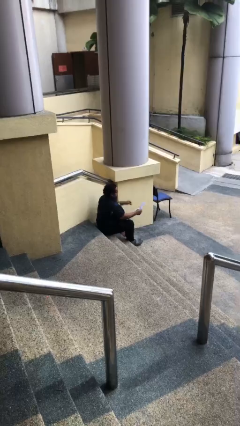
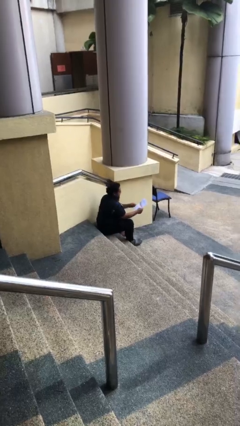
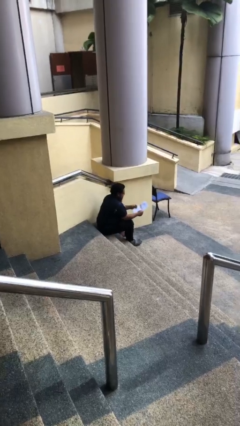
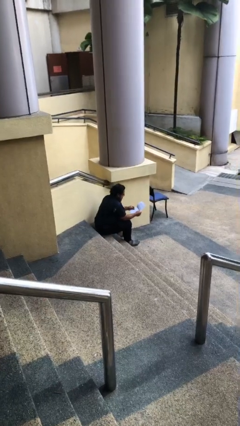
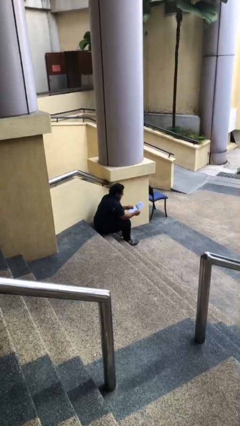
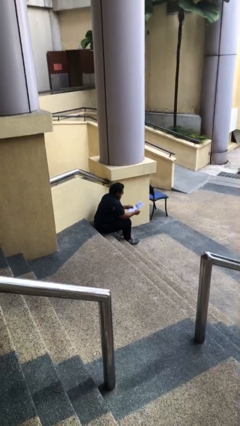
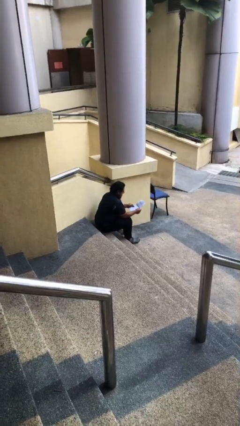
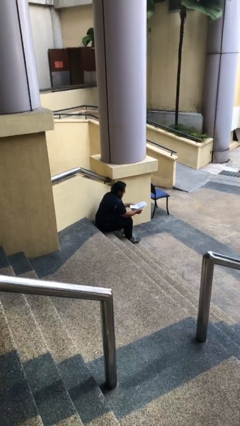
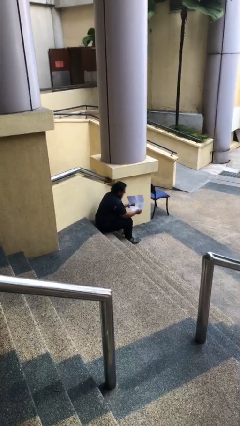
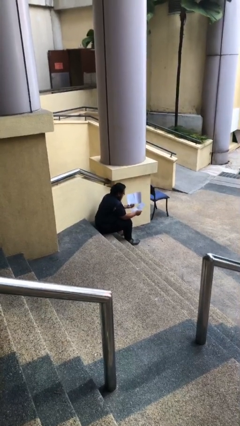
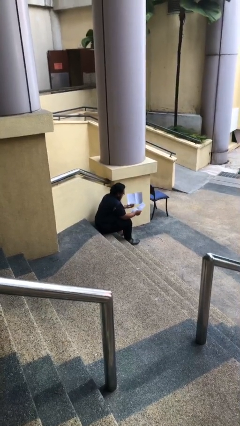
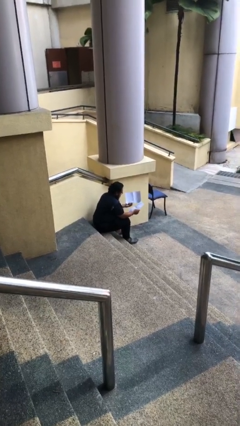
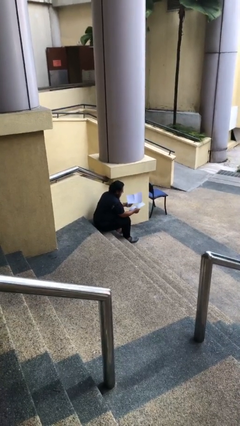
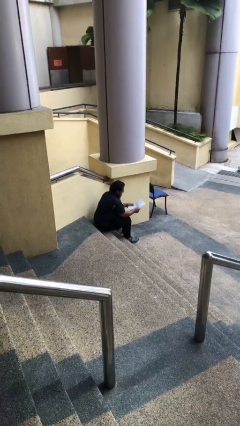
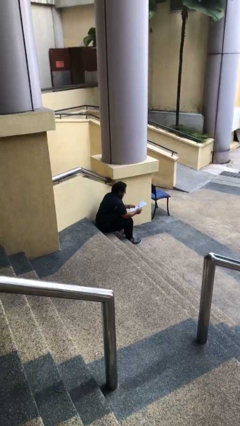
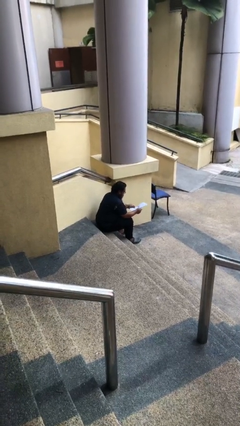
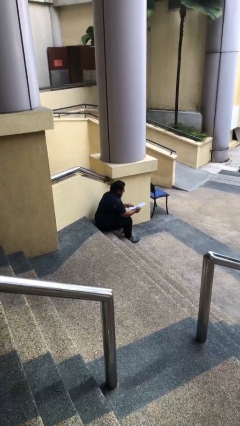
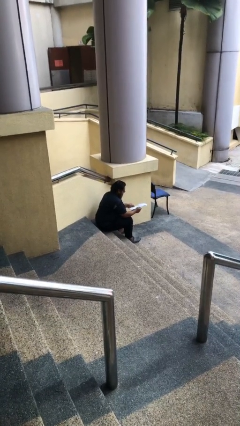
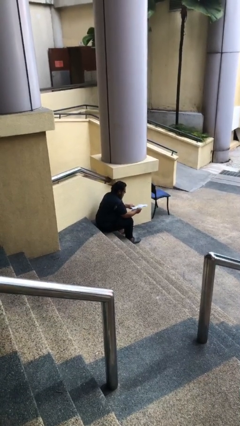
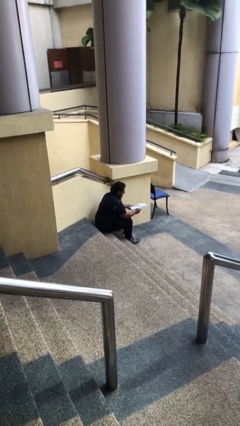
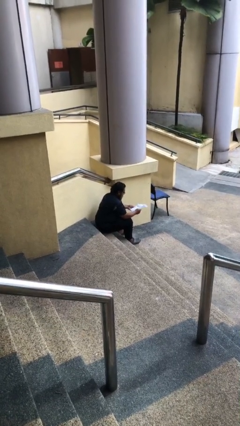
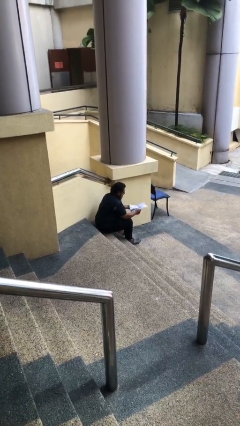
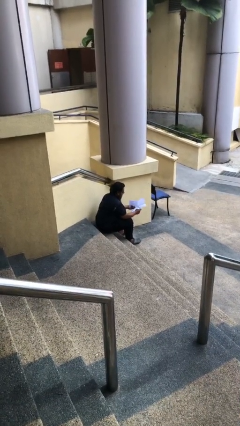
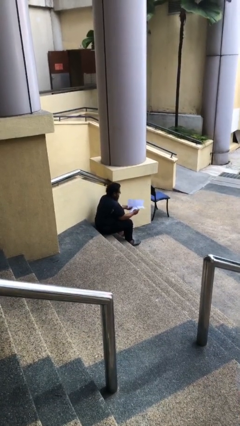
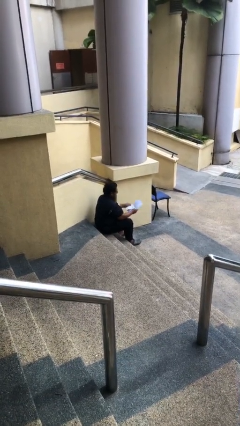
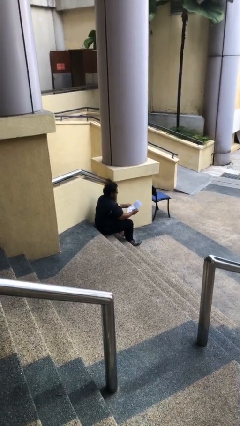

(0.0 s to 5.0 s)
person reads document

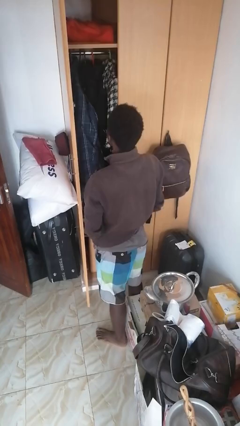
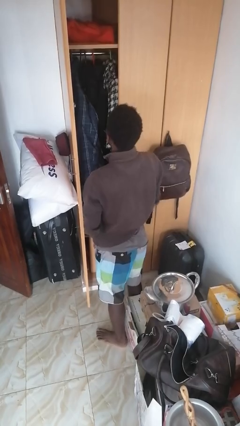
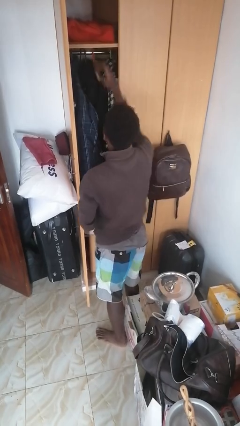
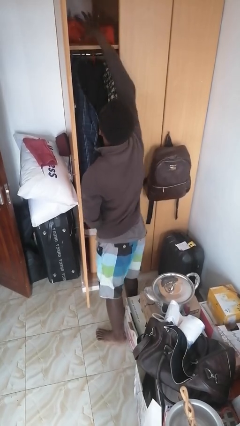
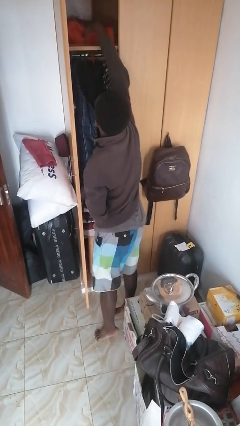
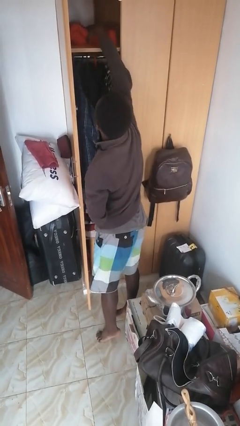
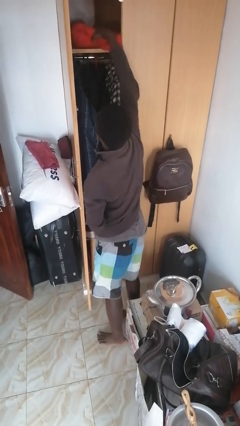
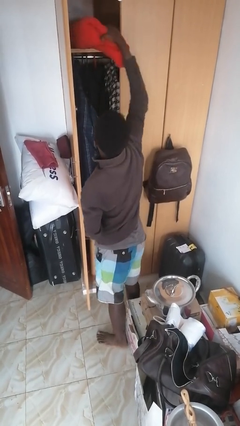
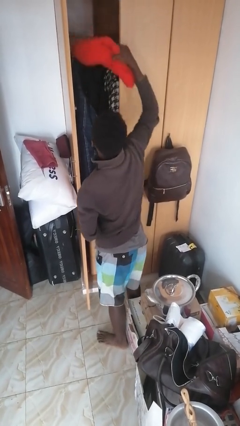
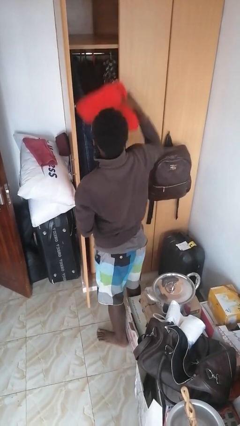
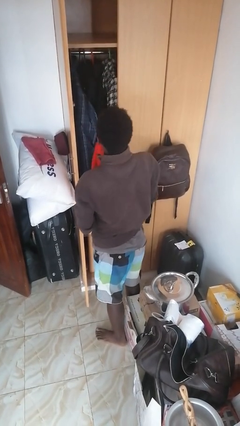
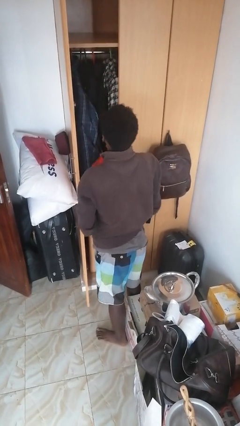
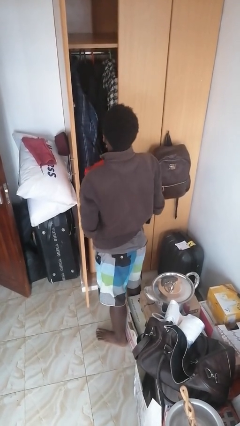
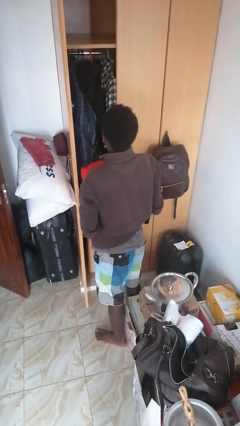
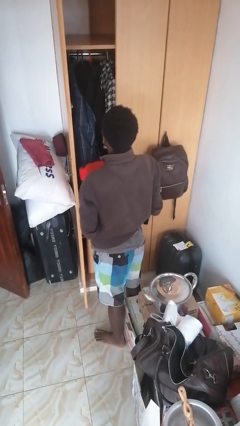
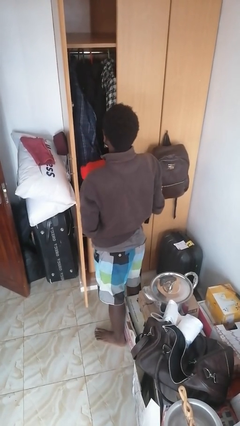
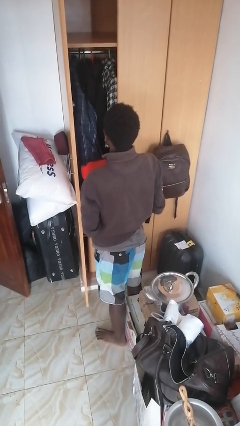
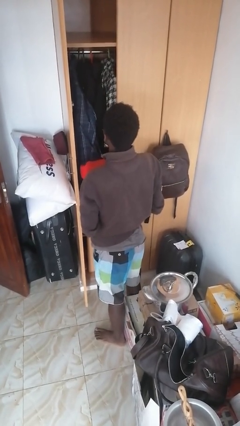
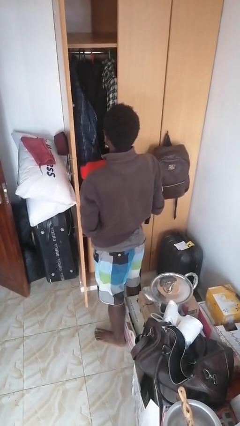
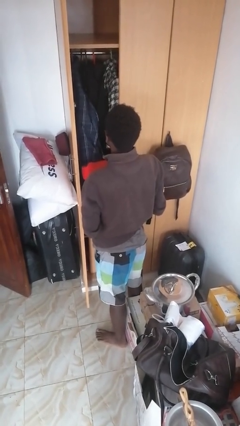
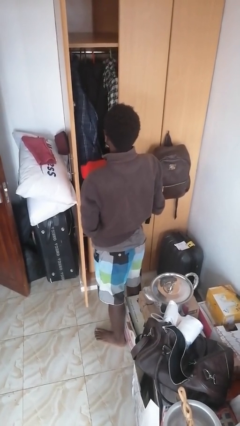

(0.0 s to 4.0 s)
person picks up object from shelf

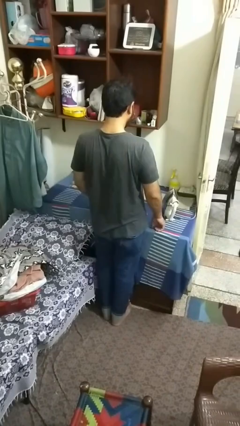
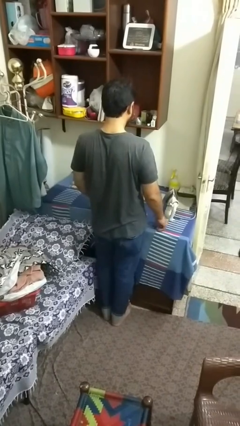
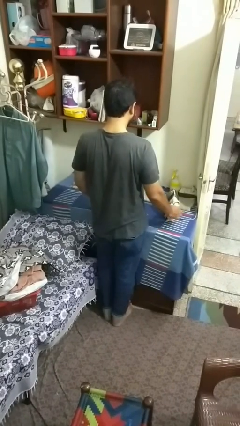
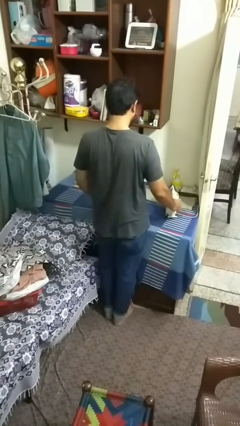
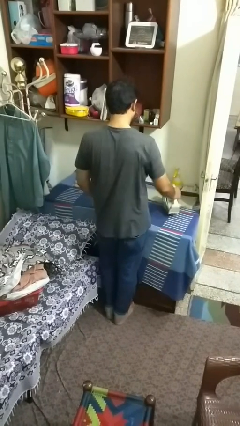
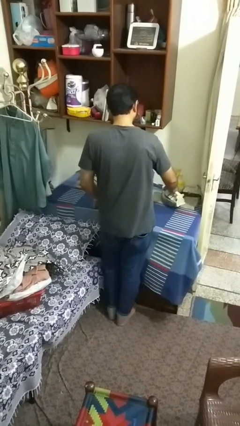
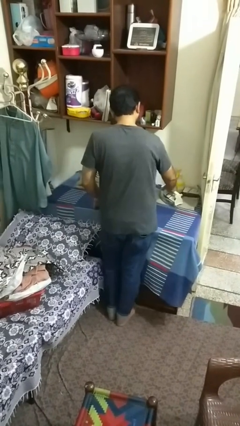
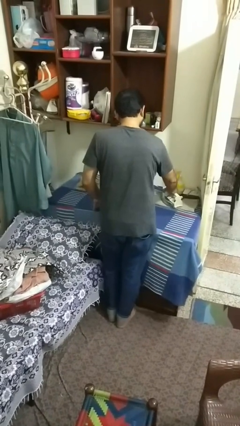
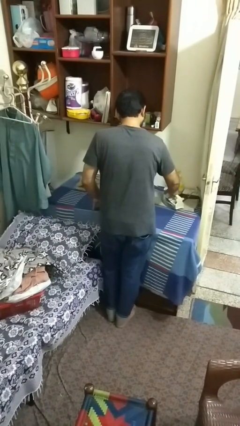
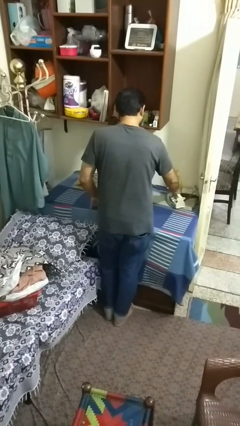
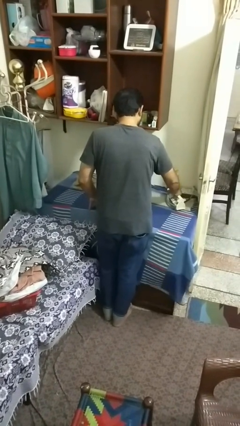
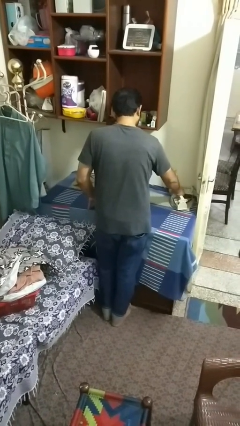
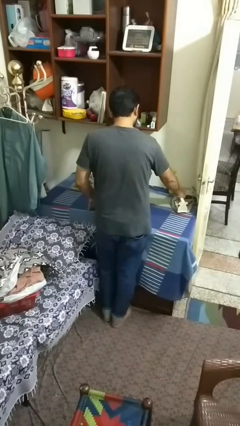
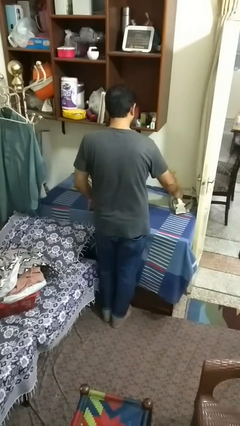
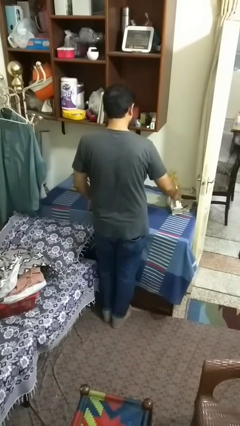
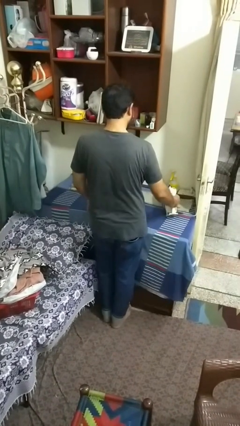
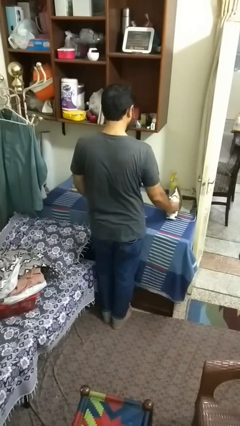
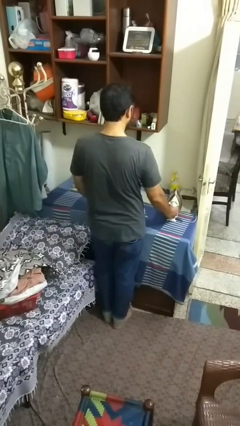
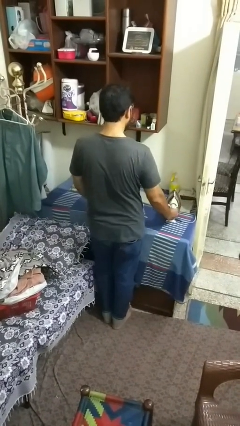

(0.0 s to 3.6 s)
person irons clothes

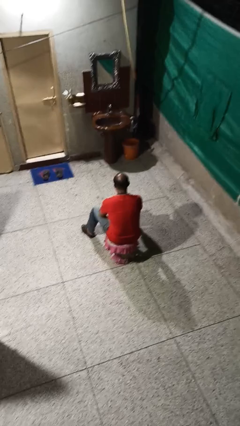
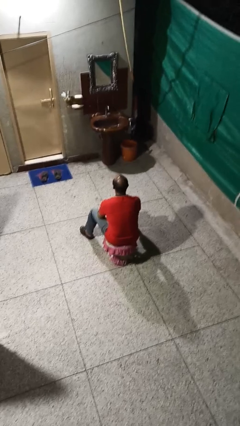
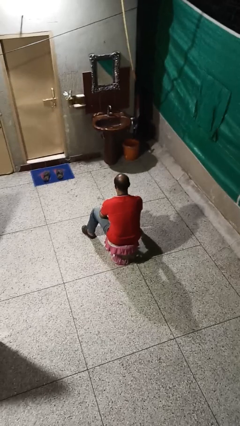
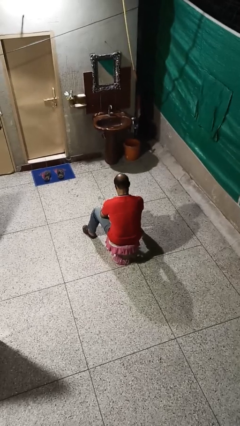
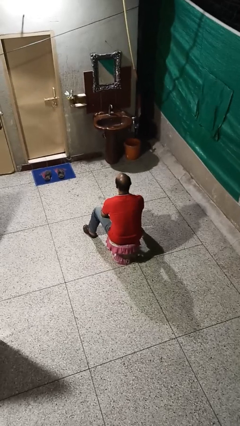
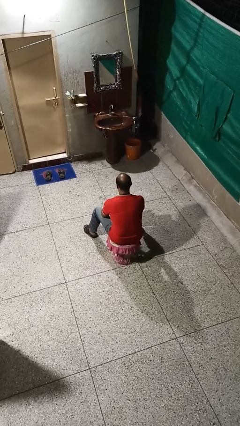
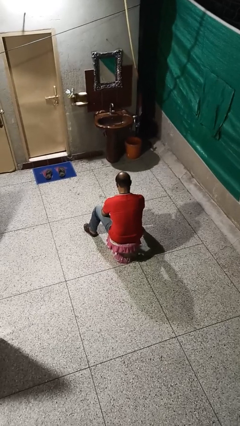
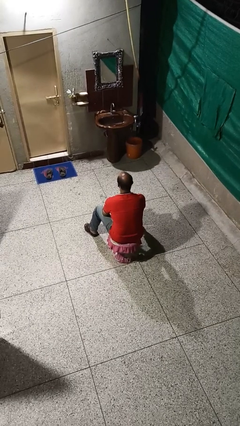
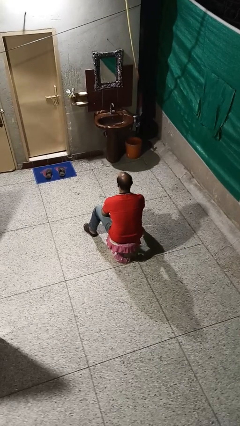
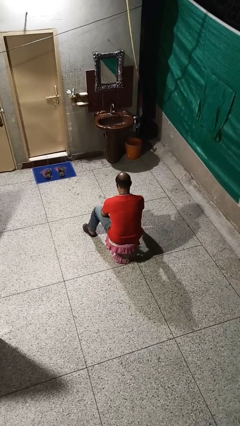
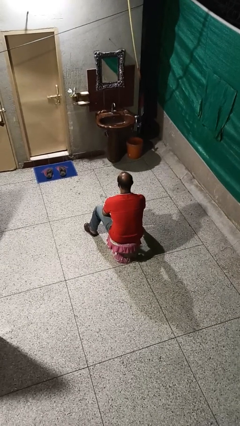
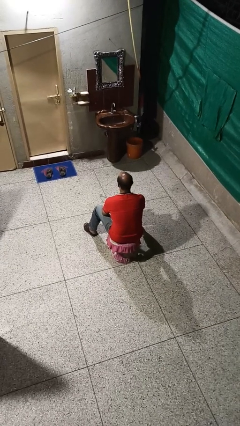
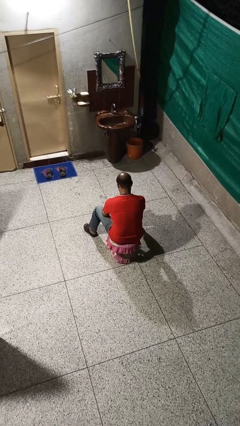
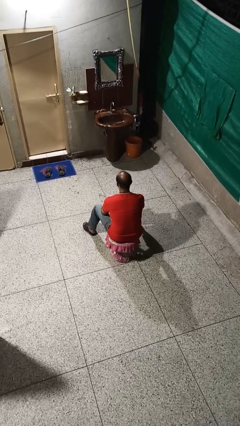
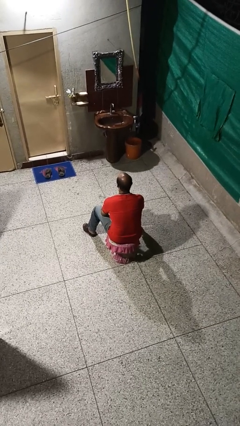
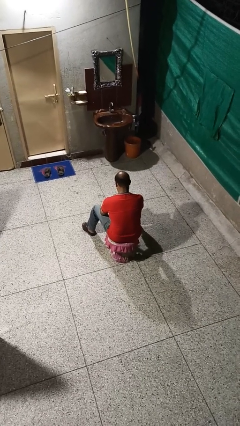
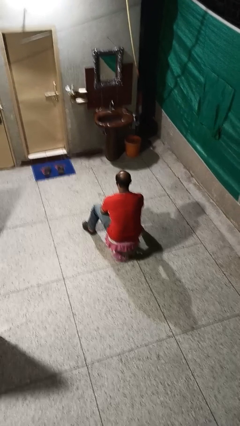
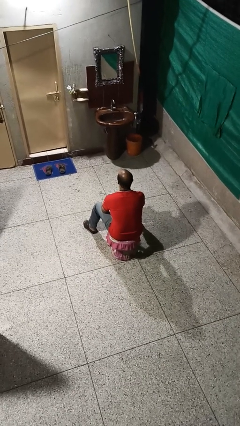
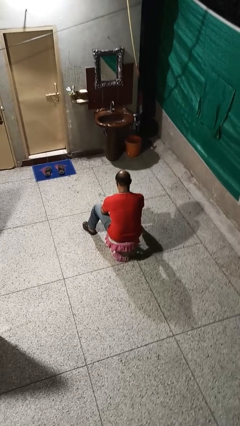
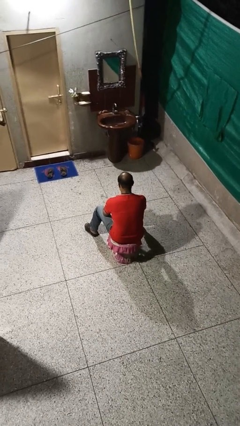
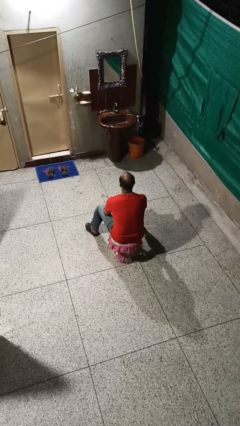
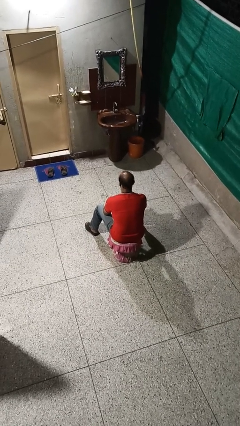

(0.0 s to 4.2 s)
person nods head

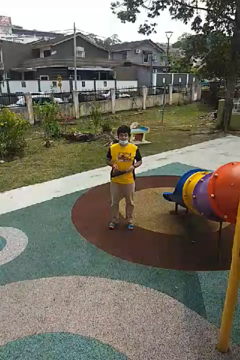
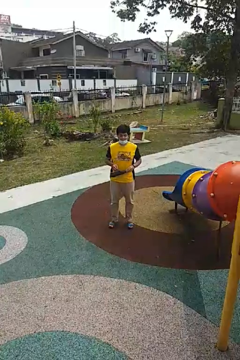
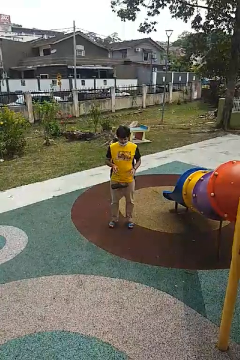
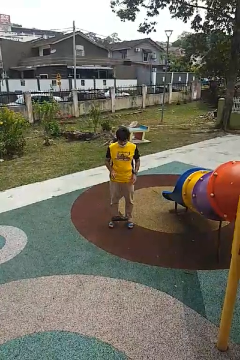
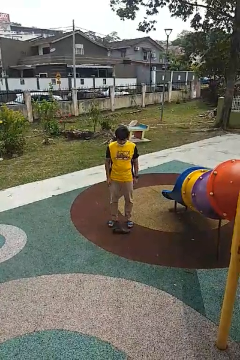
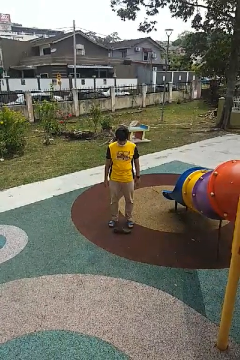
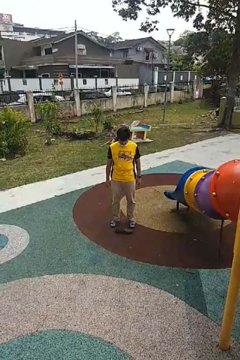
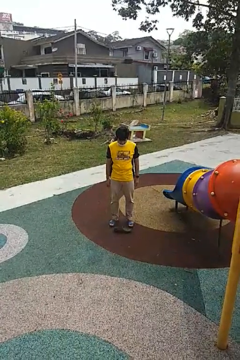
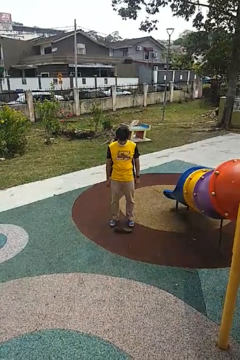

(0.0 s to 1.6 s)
person drops object
